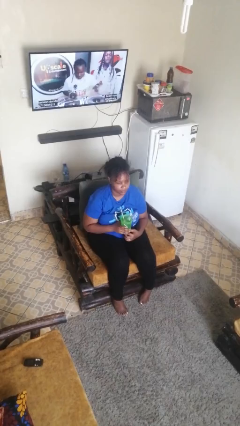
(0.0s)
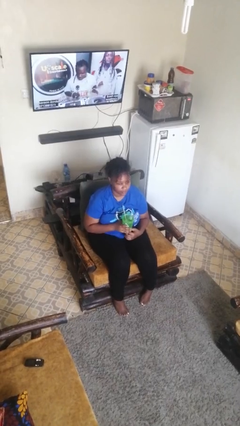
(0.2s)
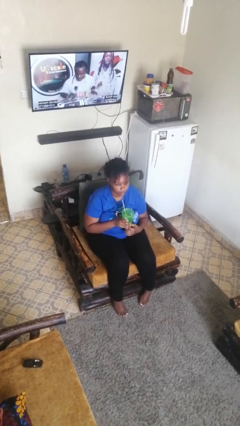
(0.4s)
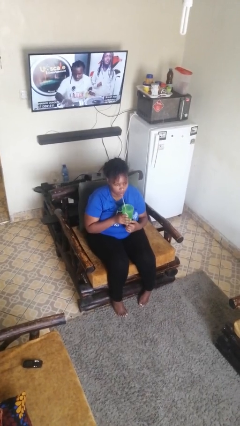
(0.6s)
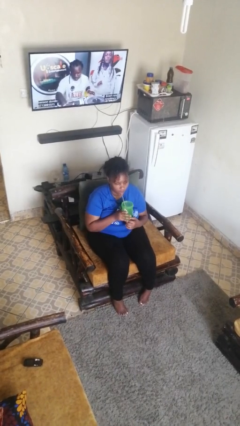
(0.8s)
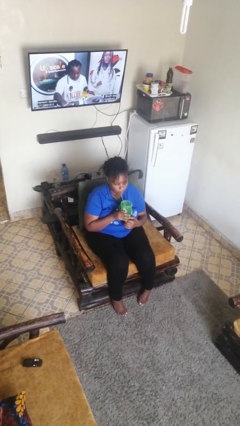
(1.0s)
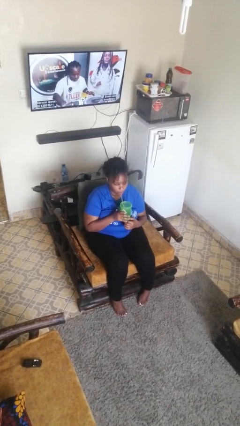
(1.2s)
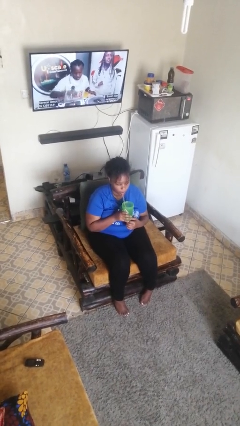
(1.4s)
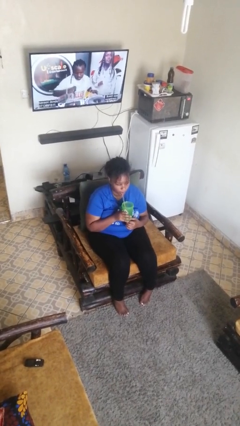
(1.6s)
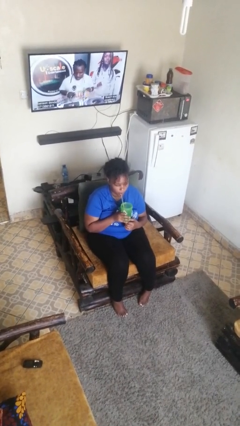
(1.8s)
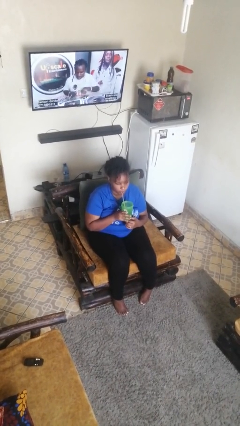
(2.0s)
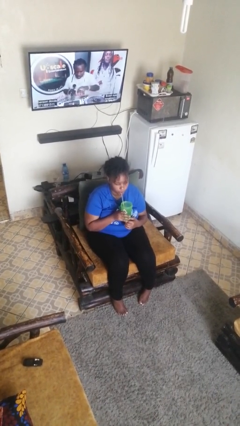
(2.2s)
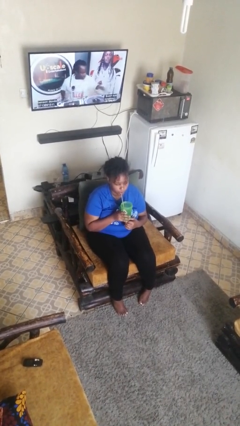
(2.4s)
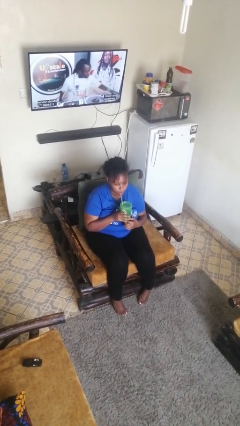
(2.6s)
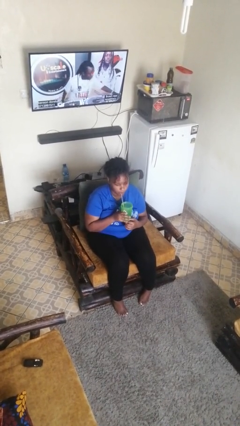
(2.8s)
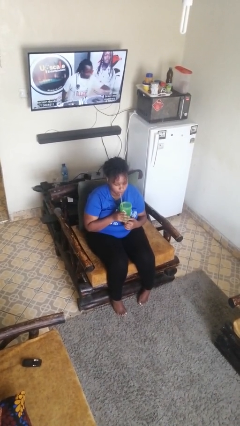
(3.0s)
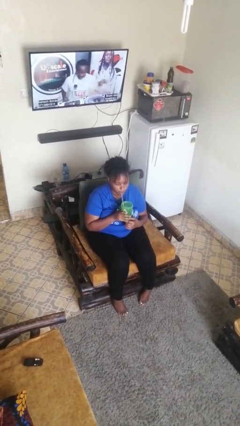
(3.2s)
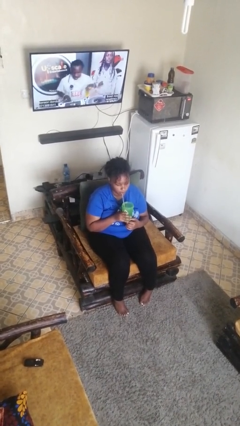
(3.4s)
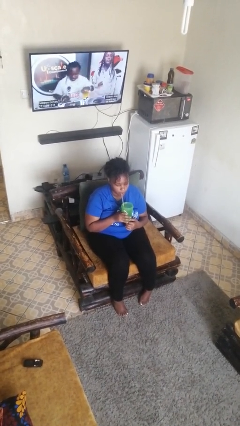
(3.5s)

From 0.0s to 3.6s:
person drinks from straw

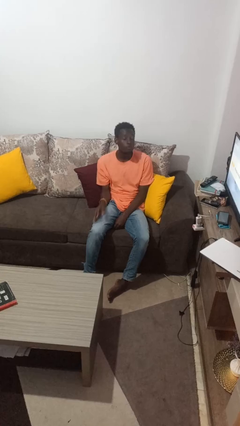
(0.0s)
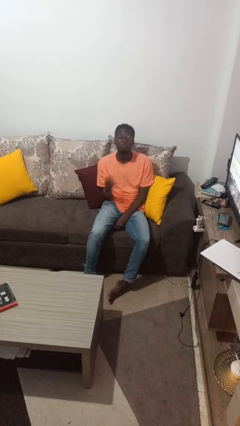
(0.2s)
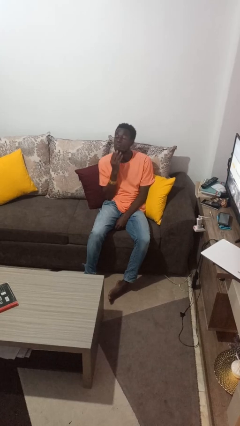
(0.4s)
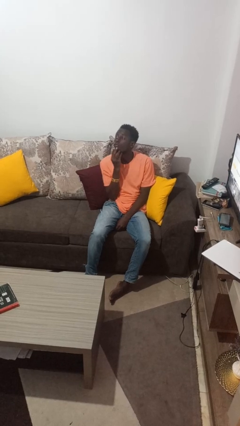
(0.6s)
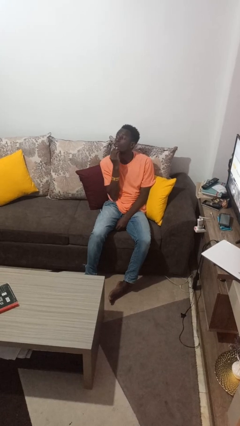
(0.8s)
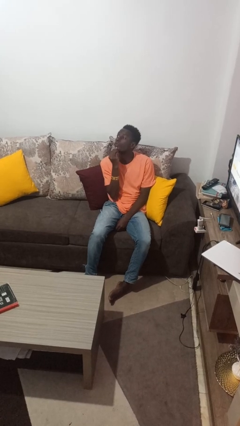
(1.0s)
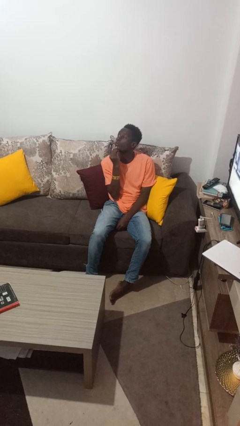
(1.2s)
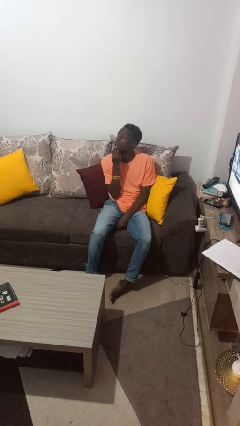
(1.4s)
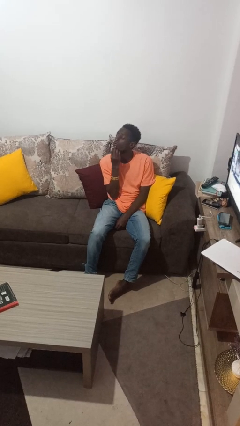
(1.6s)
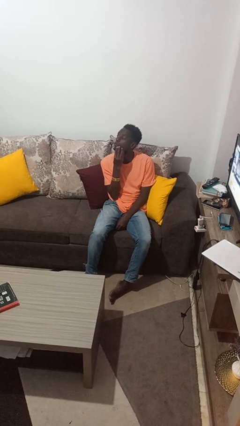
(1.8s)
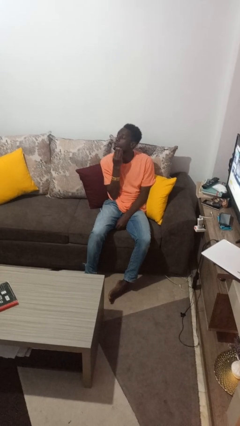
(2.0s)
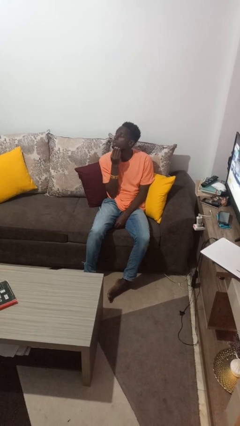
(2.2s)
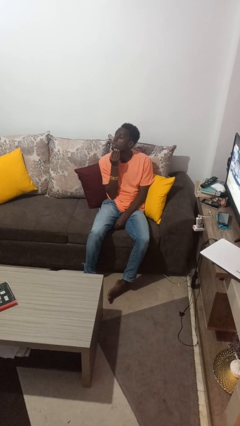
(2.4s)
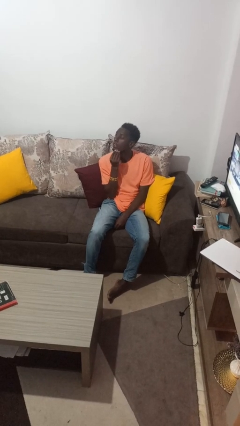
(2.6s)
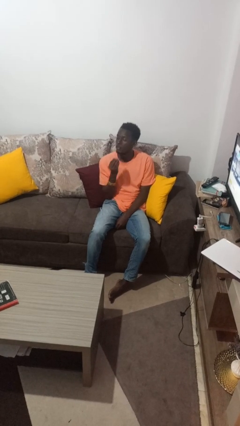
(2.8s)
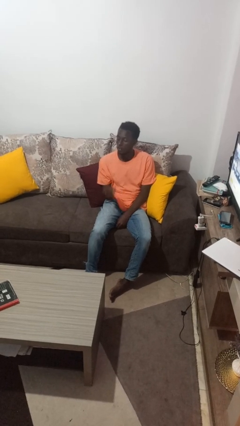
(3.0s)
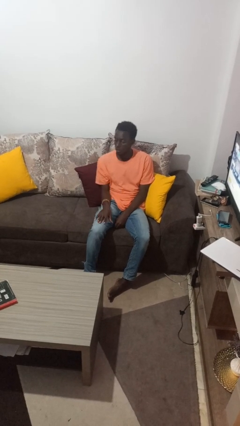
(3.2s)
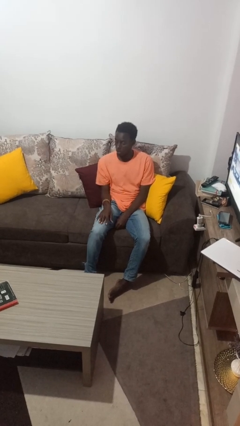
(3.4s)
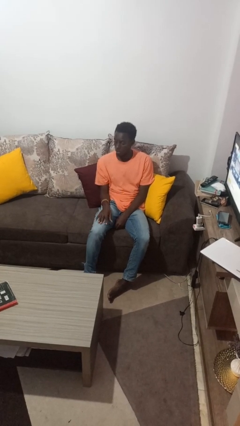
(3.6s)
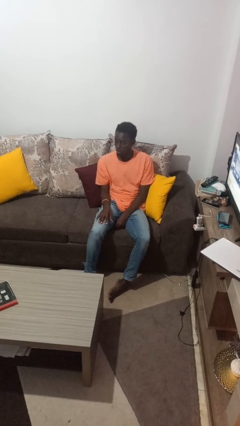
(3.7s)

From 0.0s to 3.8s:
person strokes chin

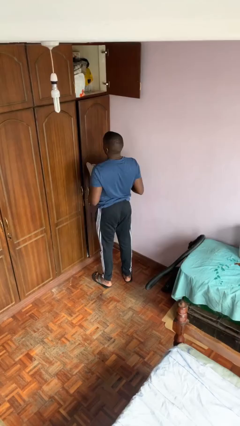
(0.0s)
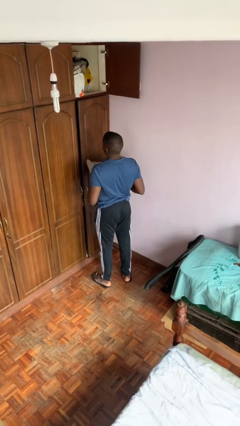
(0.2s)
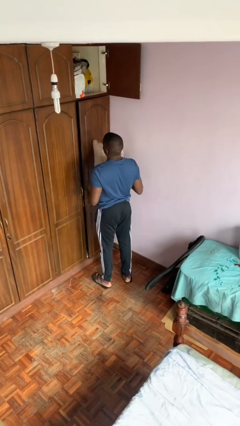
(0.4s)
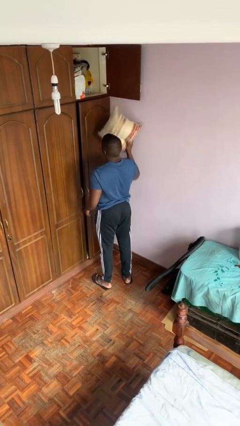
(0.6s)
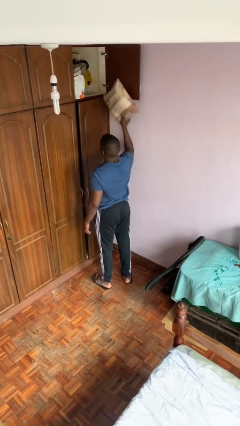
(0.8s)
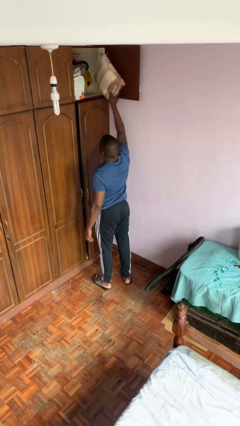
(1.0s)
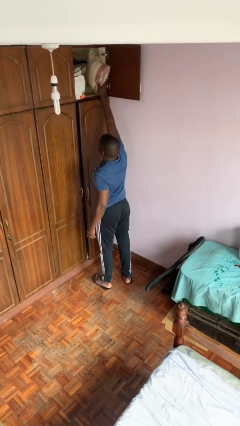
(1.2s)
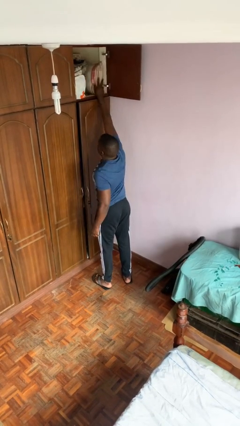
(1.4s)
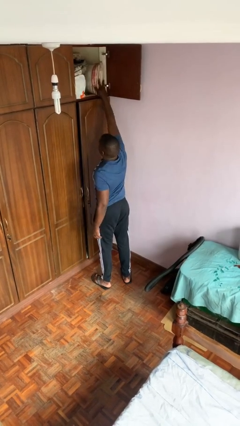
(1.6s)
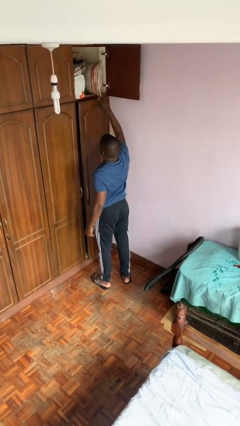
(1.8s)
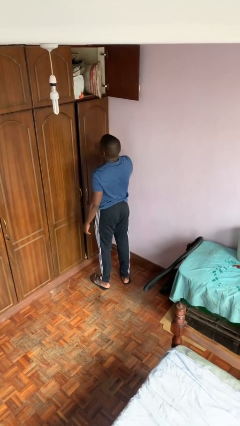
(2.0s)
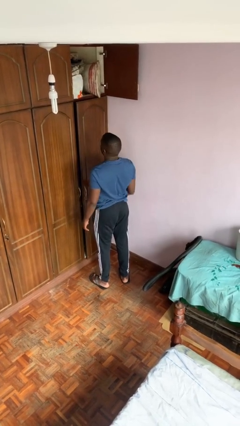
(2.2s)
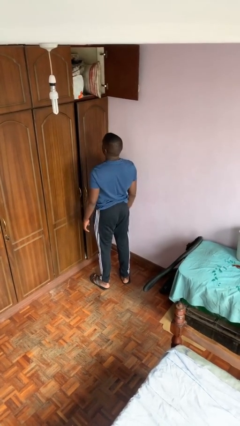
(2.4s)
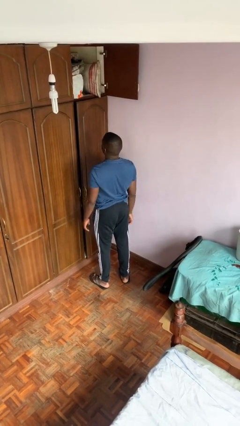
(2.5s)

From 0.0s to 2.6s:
person puts down object on shelf

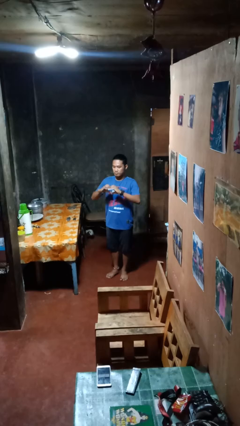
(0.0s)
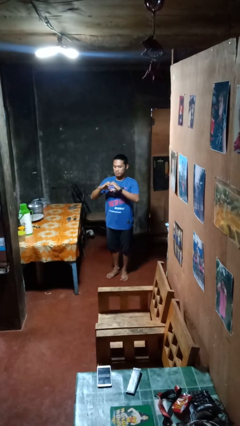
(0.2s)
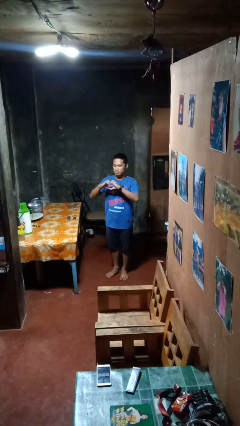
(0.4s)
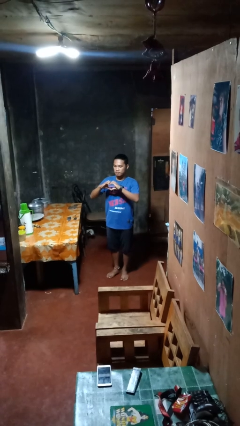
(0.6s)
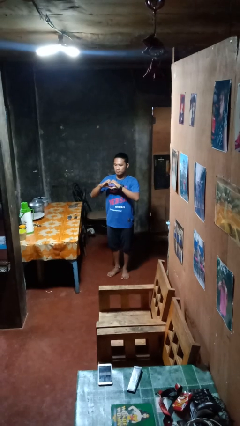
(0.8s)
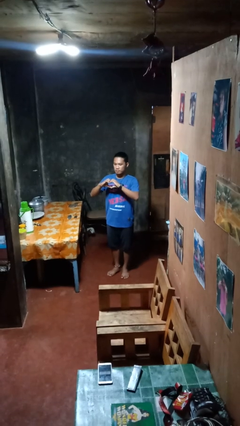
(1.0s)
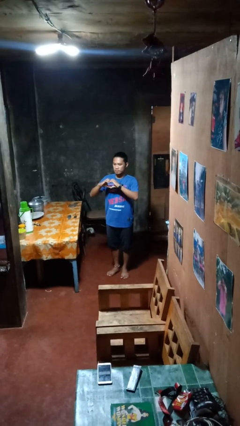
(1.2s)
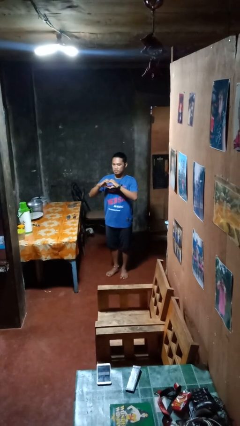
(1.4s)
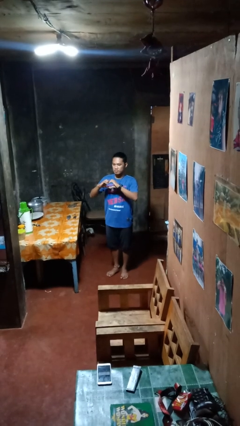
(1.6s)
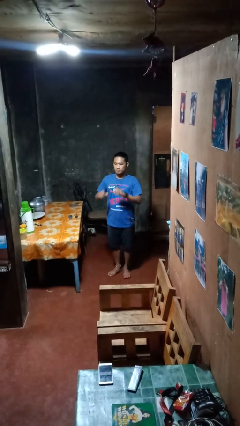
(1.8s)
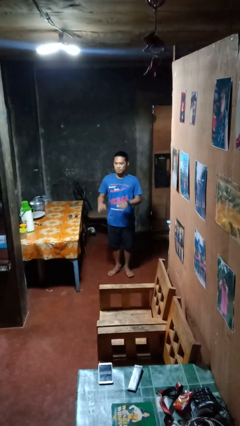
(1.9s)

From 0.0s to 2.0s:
person gestures heart

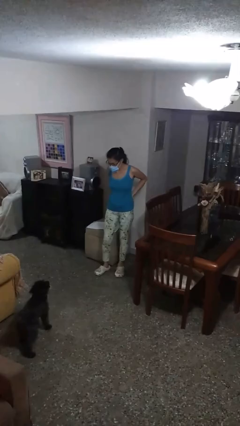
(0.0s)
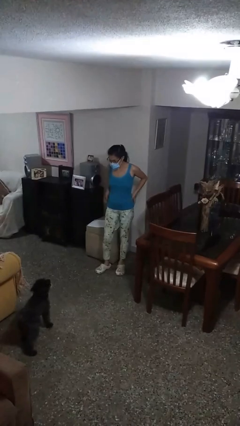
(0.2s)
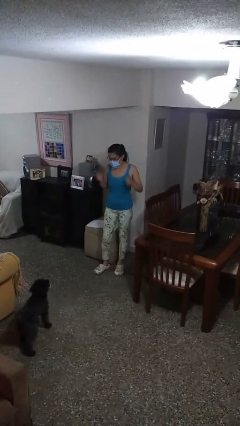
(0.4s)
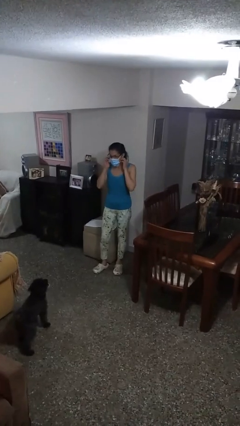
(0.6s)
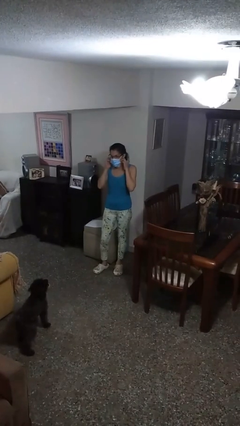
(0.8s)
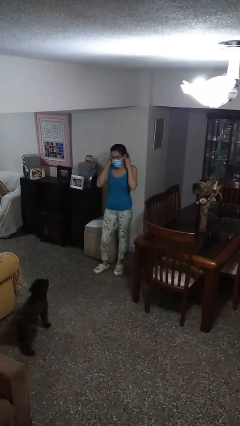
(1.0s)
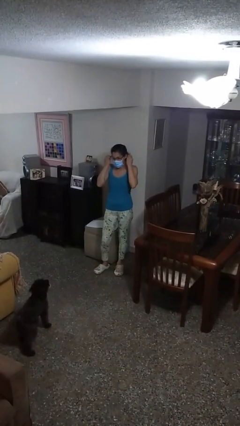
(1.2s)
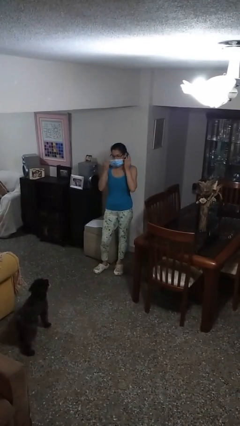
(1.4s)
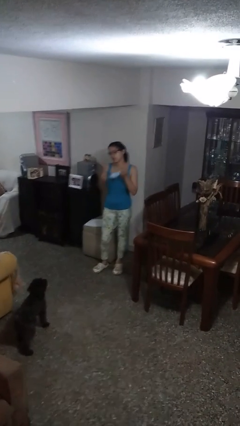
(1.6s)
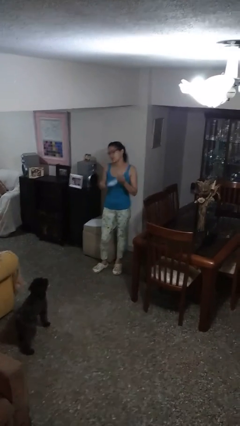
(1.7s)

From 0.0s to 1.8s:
person takes off facemask

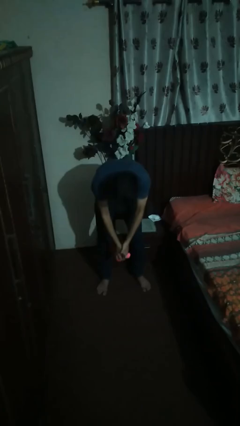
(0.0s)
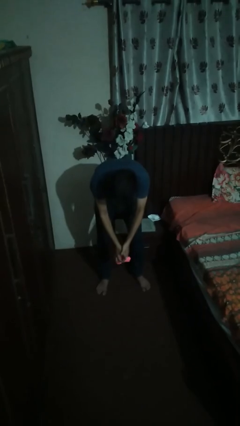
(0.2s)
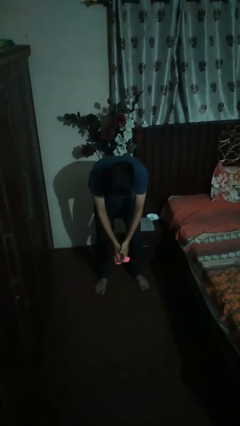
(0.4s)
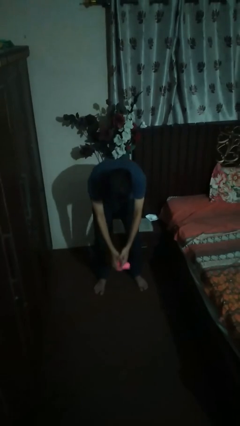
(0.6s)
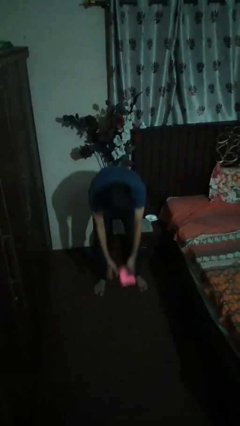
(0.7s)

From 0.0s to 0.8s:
person catches dropped object

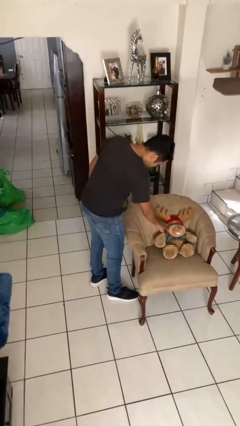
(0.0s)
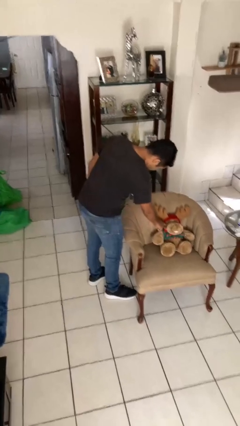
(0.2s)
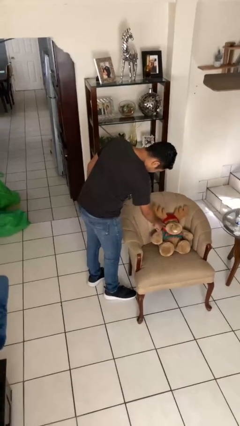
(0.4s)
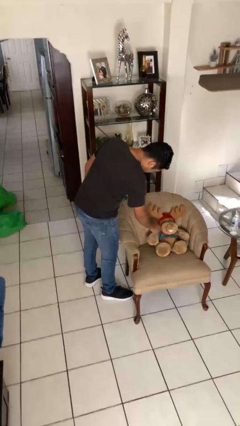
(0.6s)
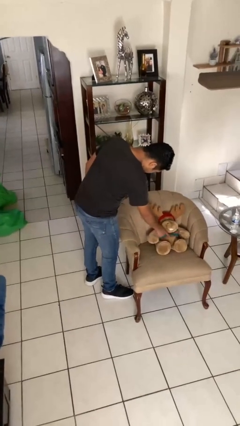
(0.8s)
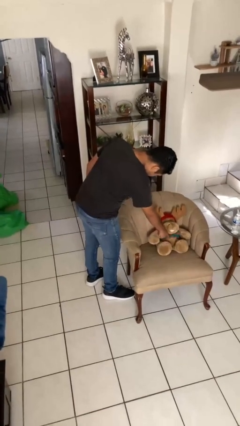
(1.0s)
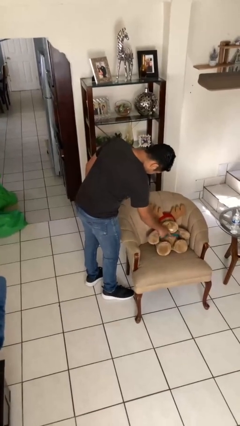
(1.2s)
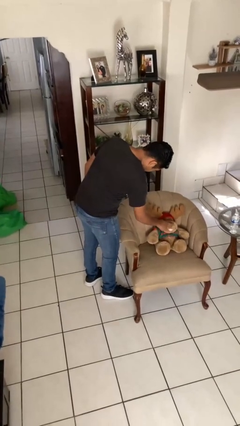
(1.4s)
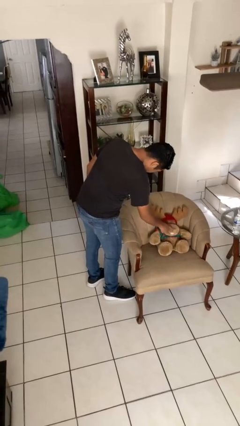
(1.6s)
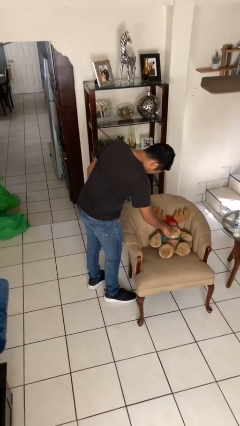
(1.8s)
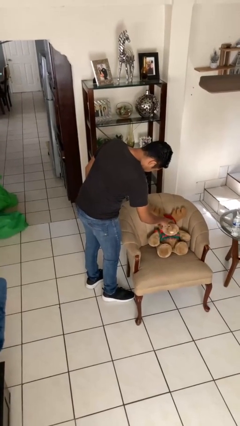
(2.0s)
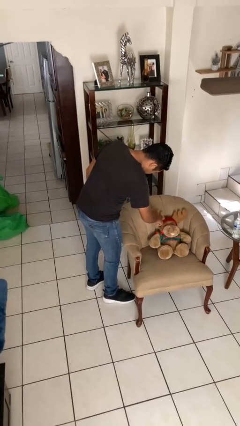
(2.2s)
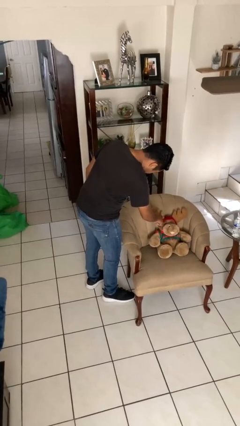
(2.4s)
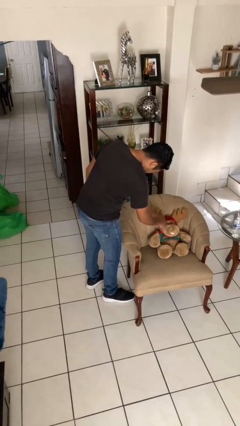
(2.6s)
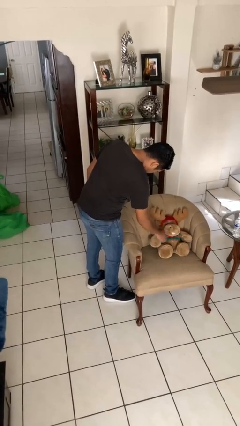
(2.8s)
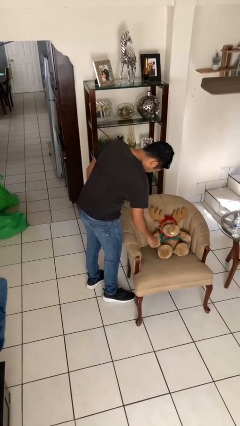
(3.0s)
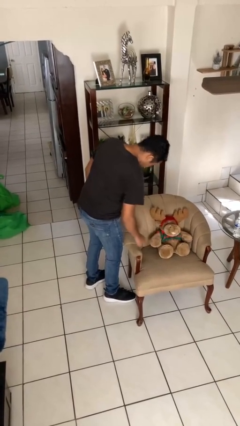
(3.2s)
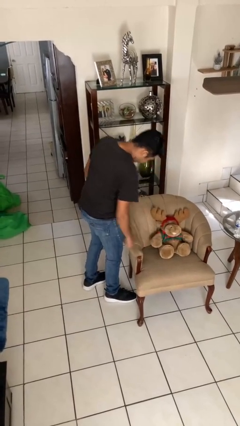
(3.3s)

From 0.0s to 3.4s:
person taps object with finger
